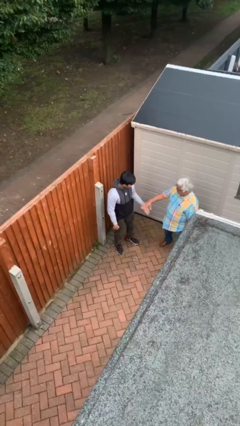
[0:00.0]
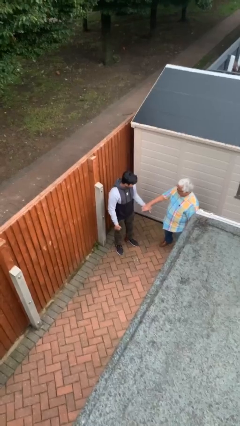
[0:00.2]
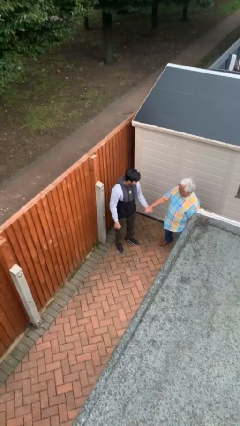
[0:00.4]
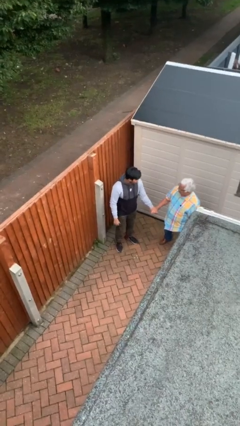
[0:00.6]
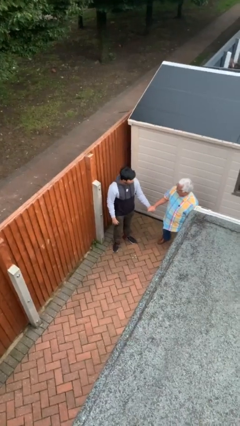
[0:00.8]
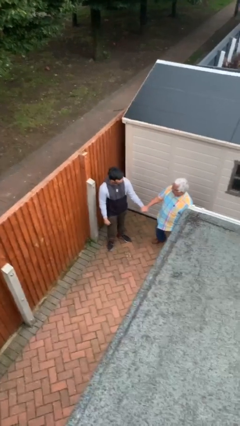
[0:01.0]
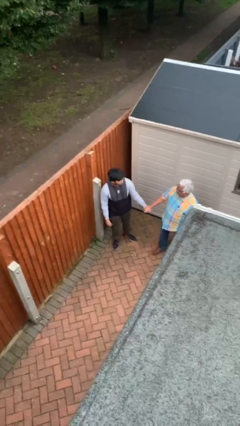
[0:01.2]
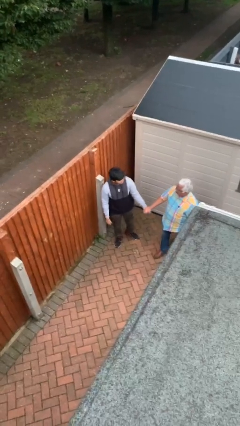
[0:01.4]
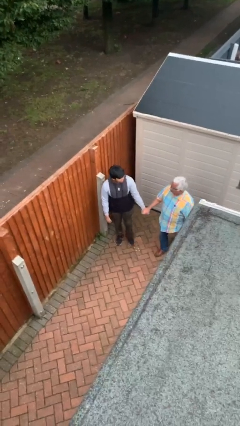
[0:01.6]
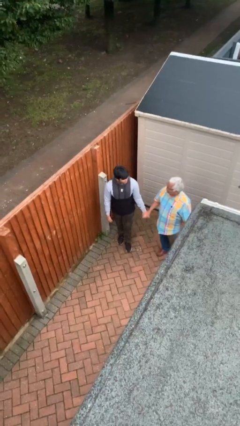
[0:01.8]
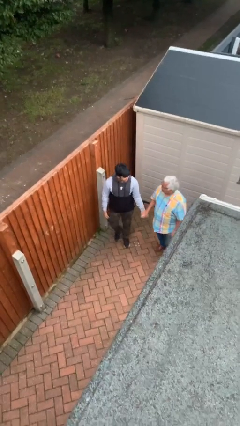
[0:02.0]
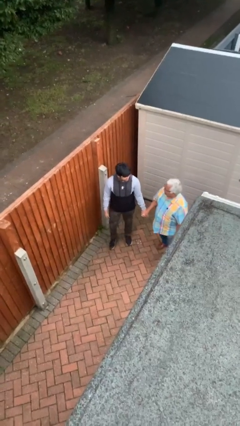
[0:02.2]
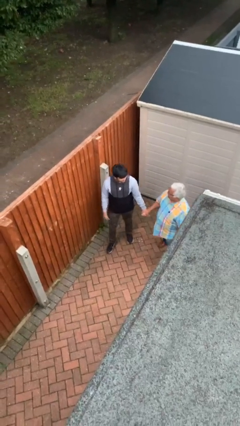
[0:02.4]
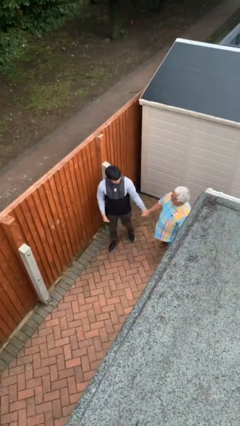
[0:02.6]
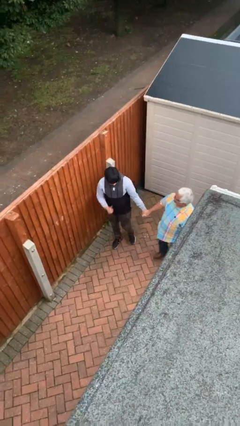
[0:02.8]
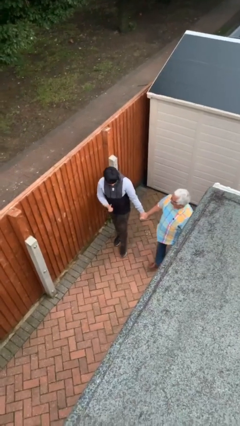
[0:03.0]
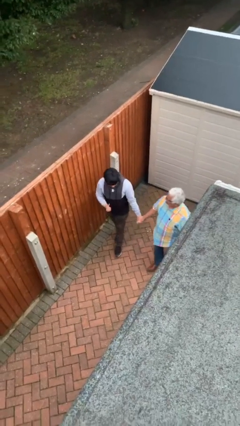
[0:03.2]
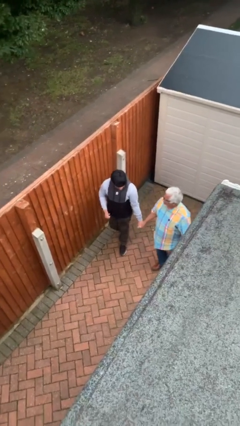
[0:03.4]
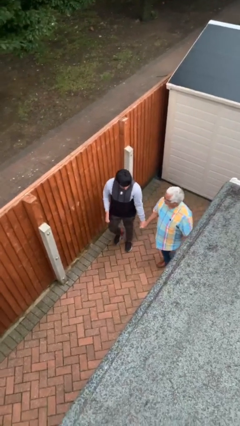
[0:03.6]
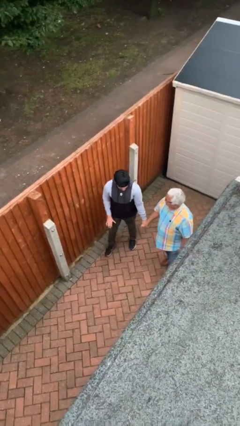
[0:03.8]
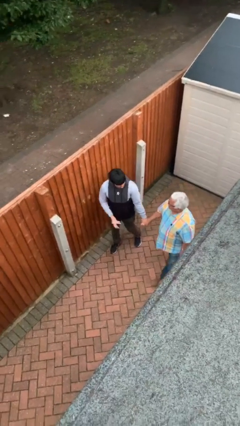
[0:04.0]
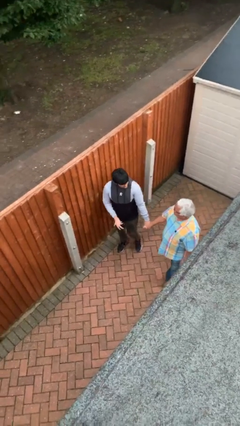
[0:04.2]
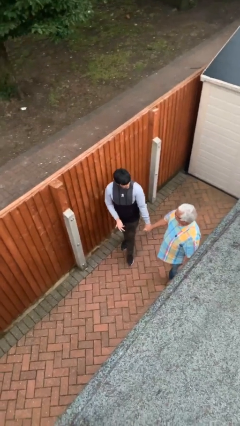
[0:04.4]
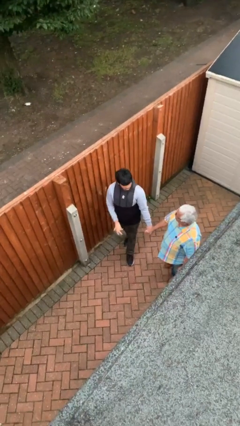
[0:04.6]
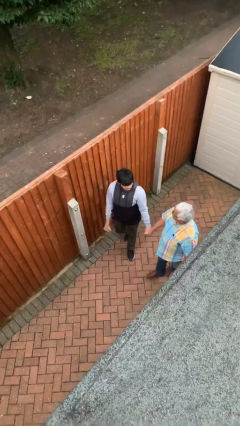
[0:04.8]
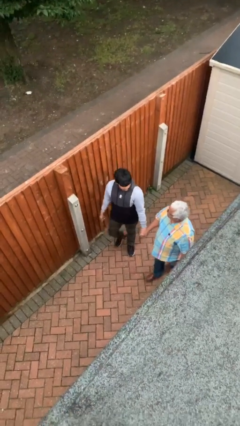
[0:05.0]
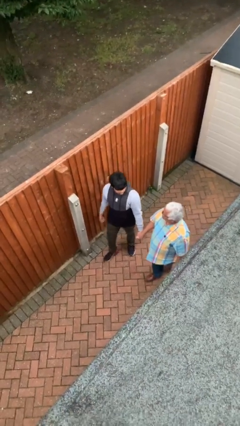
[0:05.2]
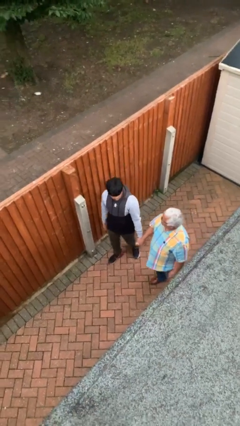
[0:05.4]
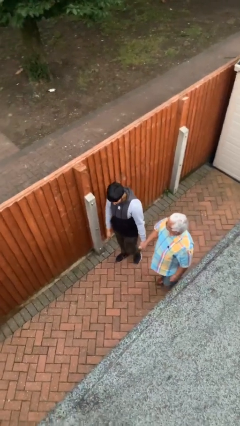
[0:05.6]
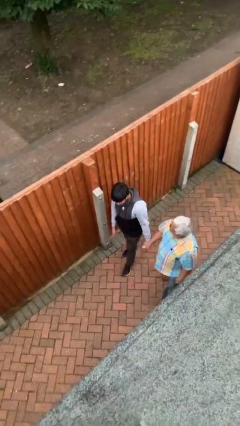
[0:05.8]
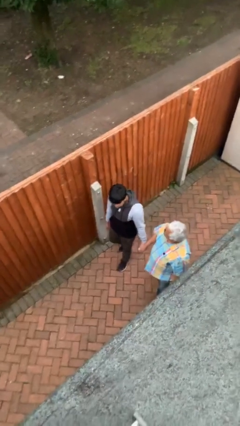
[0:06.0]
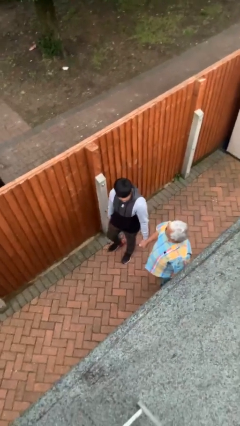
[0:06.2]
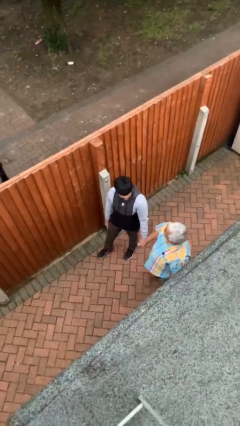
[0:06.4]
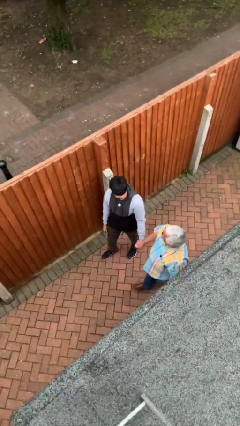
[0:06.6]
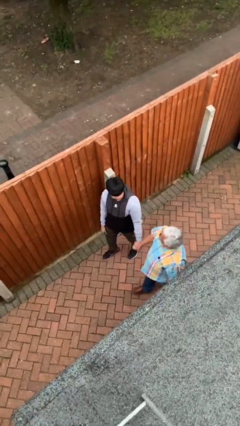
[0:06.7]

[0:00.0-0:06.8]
person holds hand

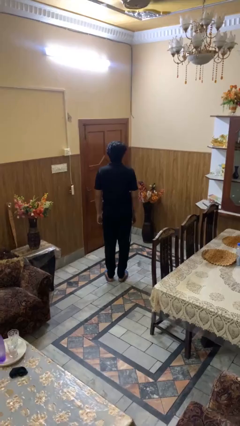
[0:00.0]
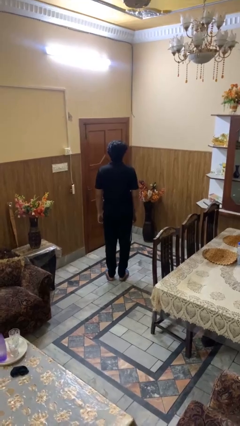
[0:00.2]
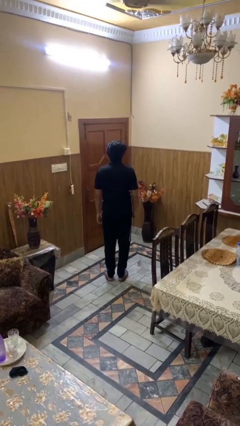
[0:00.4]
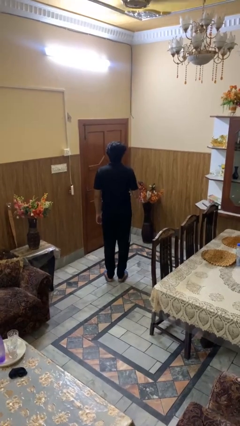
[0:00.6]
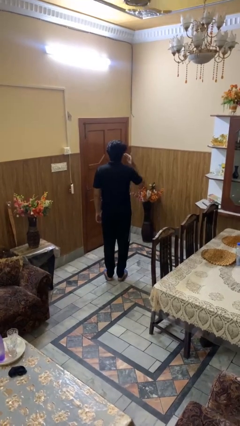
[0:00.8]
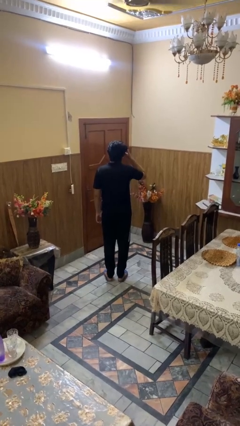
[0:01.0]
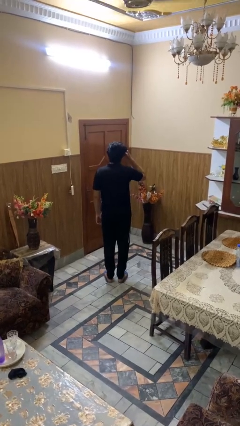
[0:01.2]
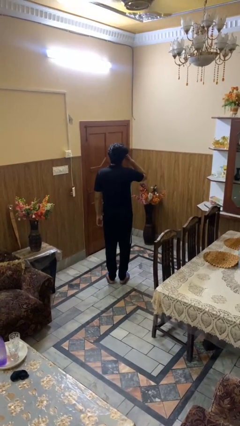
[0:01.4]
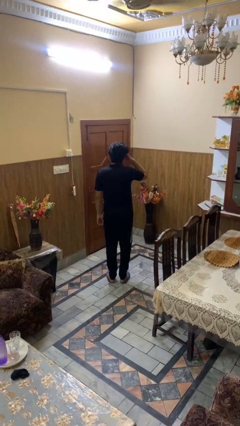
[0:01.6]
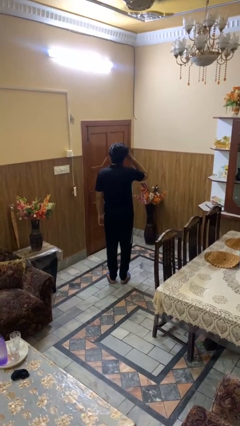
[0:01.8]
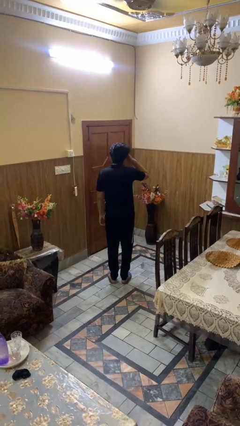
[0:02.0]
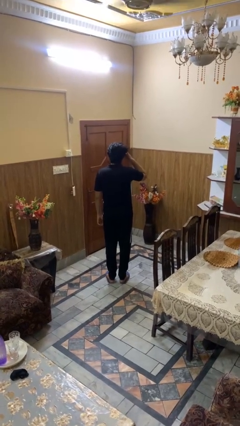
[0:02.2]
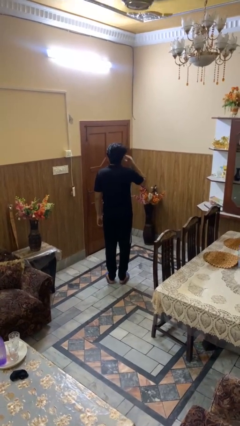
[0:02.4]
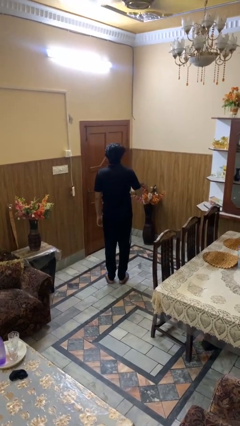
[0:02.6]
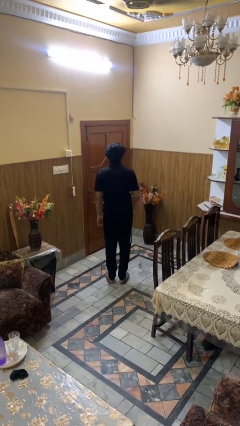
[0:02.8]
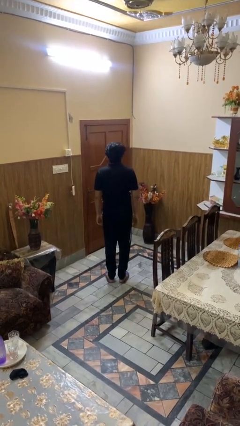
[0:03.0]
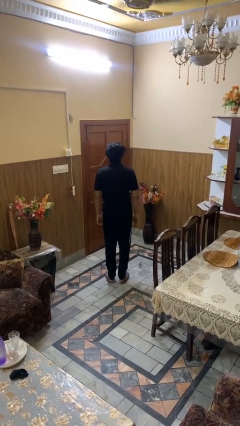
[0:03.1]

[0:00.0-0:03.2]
person rubs eyes

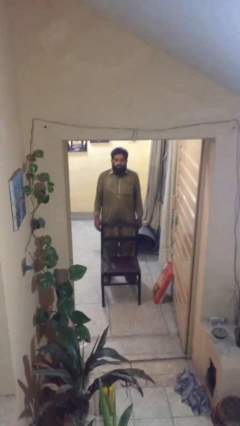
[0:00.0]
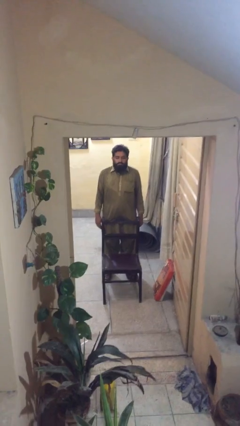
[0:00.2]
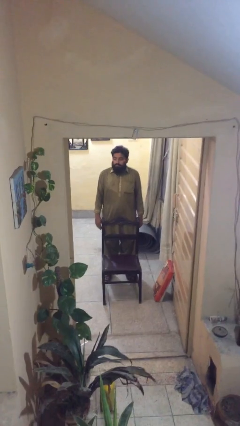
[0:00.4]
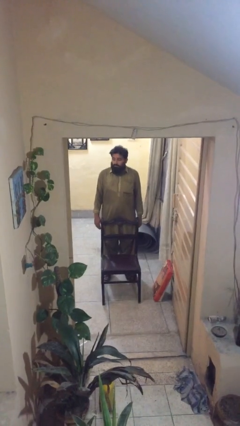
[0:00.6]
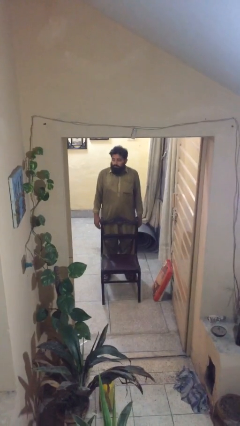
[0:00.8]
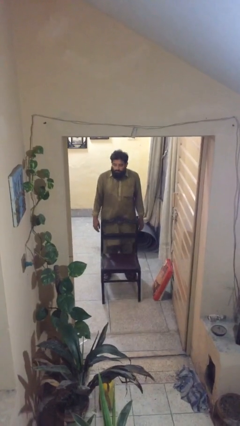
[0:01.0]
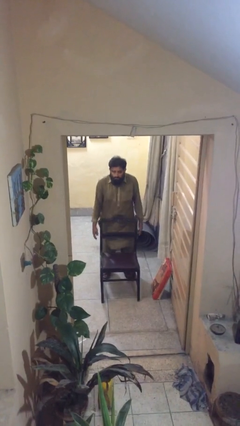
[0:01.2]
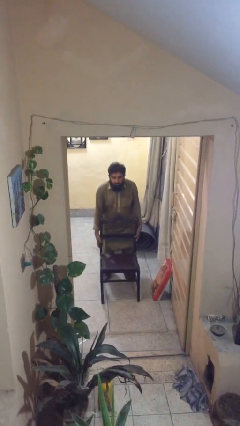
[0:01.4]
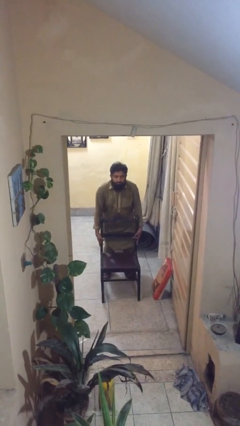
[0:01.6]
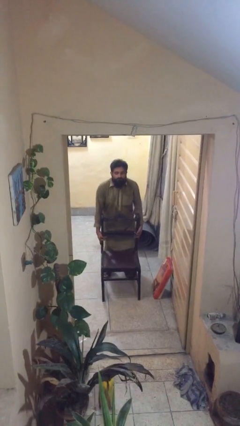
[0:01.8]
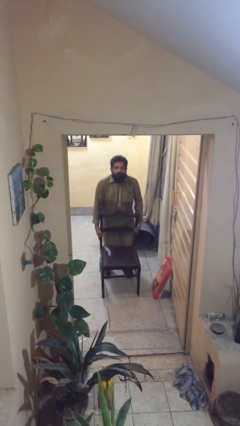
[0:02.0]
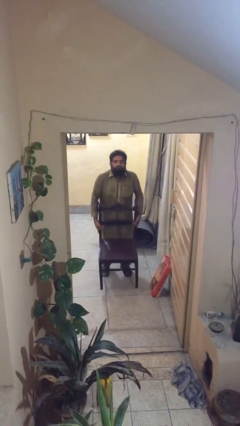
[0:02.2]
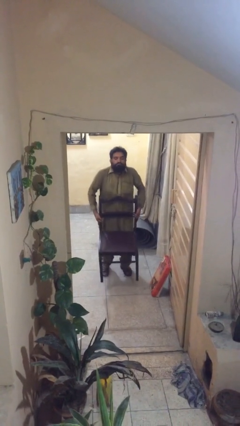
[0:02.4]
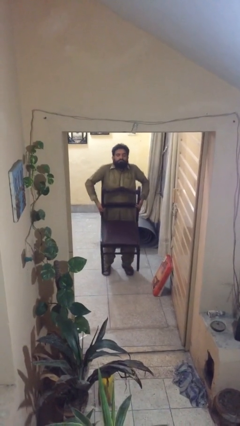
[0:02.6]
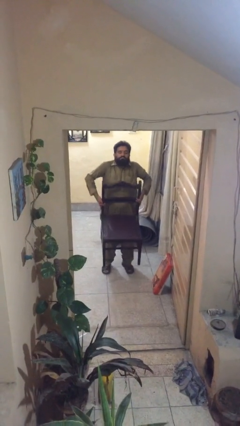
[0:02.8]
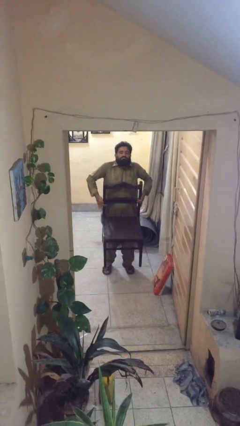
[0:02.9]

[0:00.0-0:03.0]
person picks up object from floor

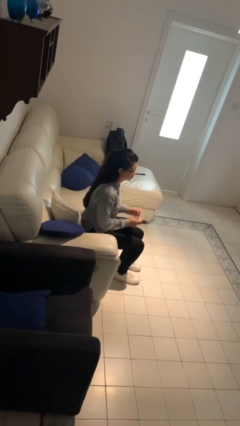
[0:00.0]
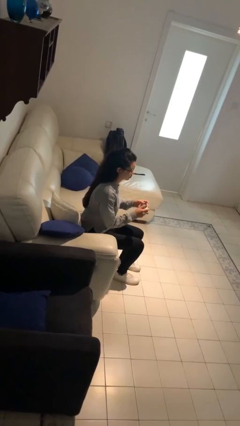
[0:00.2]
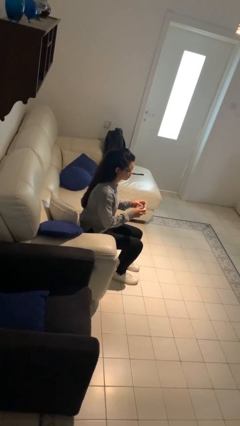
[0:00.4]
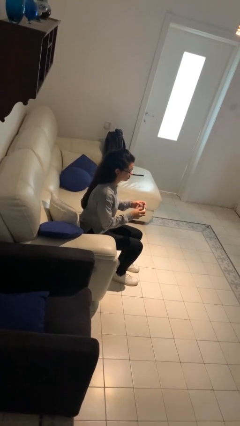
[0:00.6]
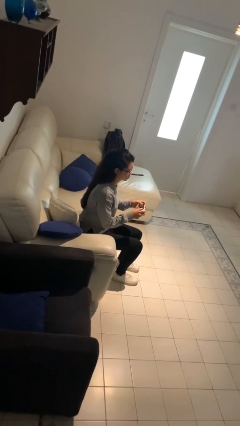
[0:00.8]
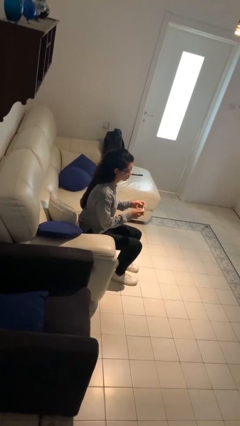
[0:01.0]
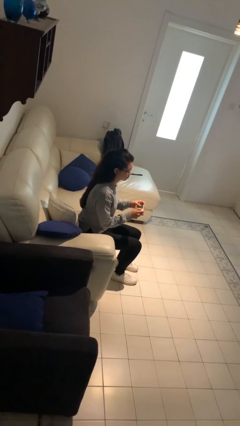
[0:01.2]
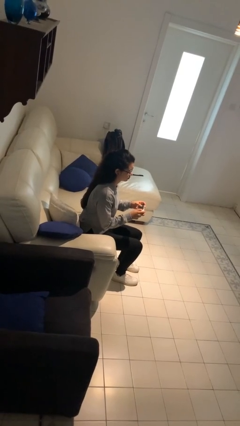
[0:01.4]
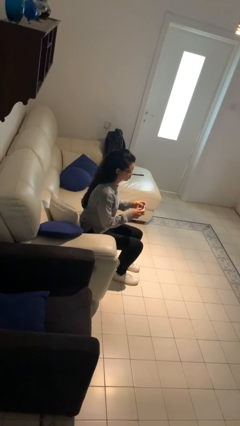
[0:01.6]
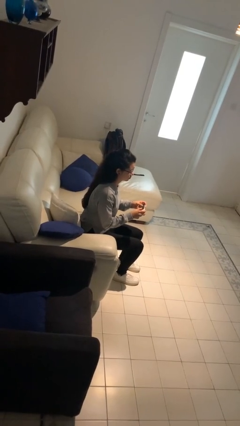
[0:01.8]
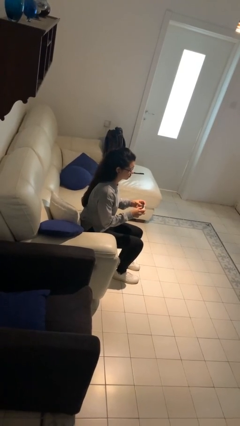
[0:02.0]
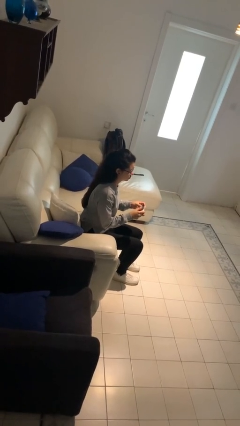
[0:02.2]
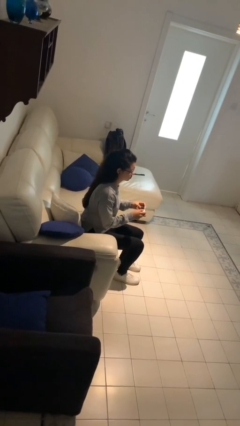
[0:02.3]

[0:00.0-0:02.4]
person interacts with handheld game

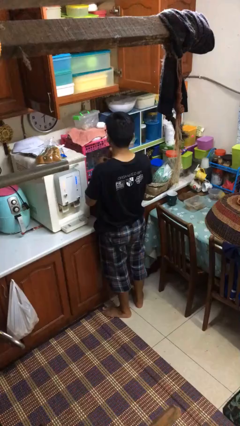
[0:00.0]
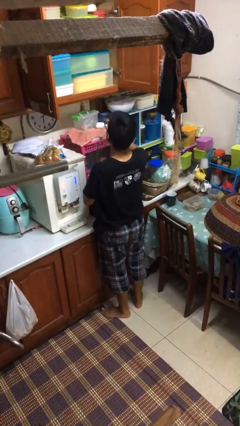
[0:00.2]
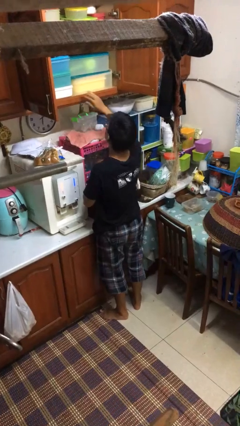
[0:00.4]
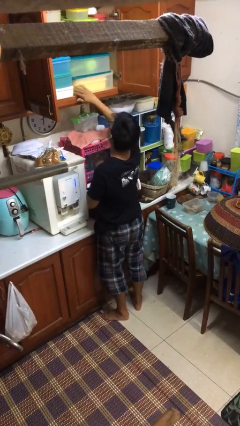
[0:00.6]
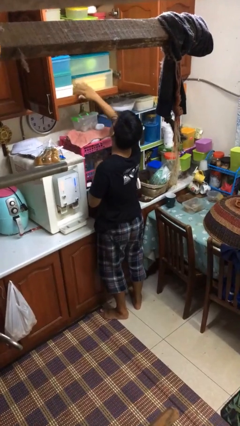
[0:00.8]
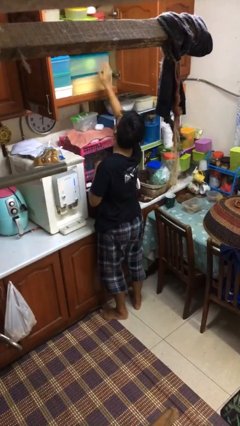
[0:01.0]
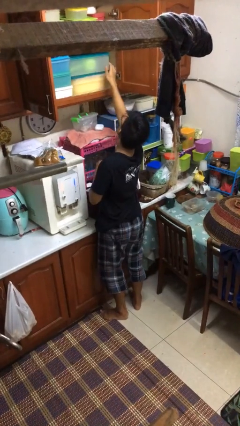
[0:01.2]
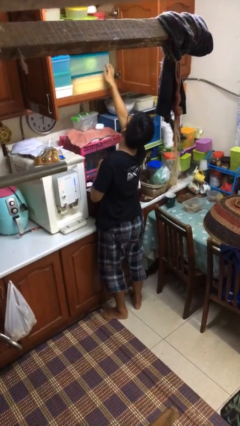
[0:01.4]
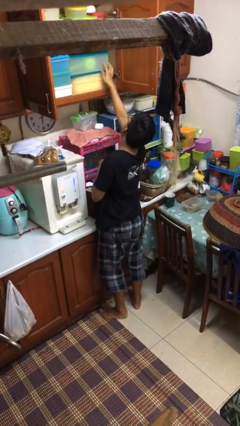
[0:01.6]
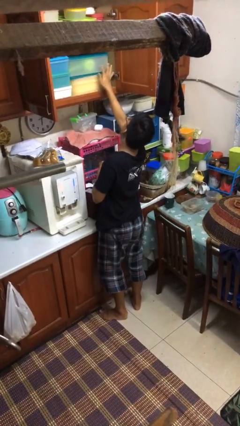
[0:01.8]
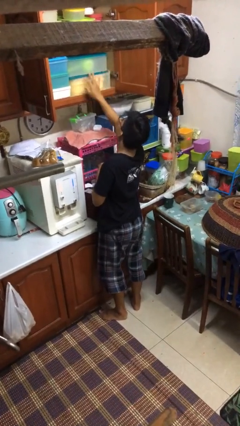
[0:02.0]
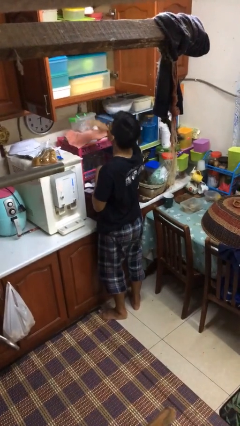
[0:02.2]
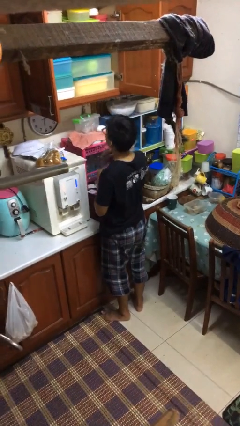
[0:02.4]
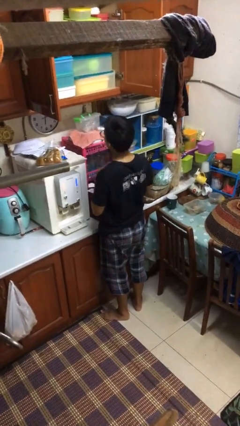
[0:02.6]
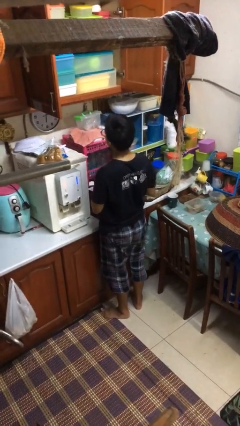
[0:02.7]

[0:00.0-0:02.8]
person searches in kitchen drawer
